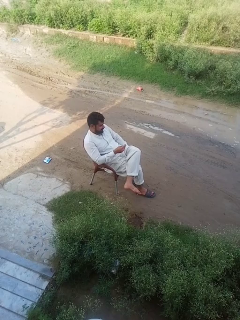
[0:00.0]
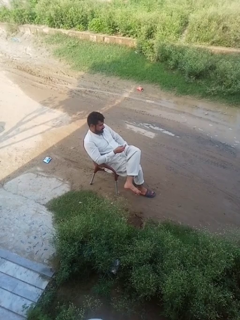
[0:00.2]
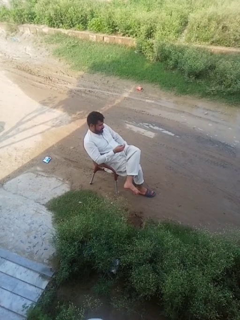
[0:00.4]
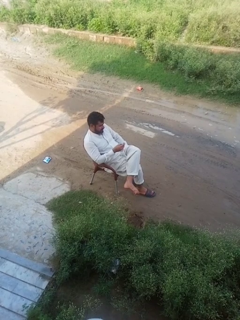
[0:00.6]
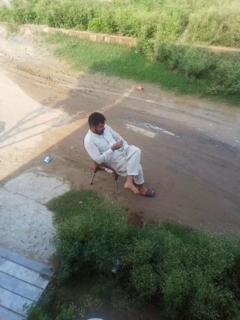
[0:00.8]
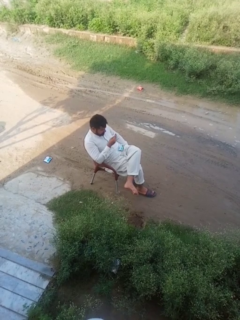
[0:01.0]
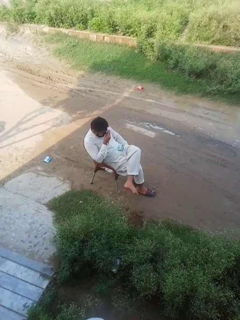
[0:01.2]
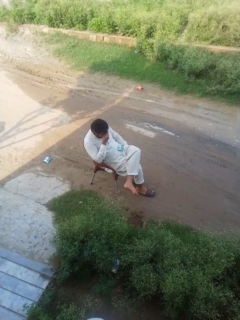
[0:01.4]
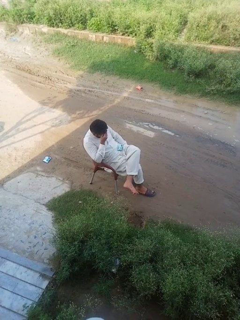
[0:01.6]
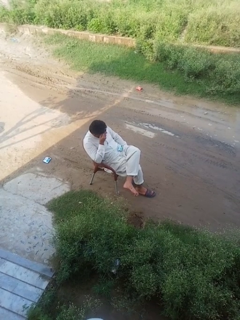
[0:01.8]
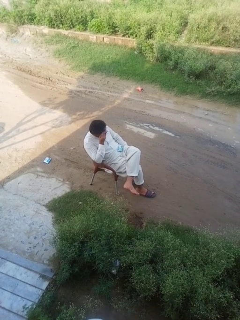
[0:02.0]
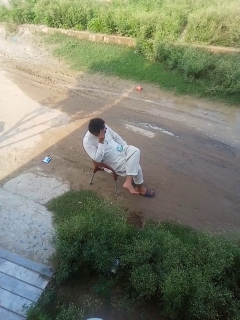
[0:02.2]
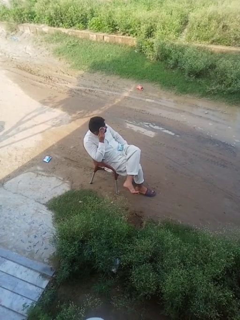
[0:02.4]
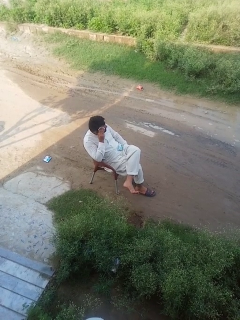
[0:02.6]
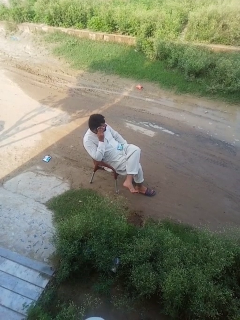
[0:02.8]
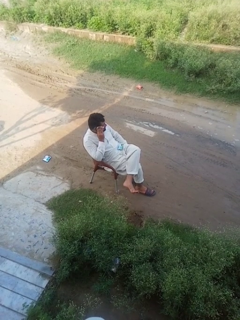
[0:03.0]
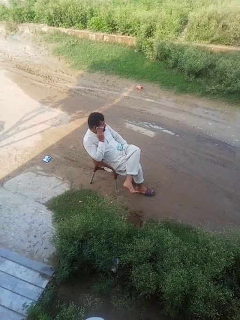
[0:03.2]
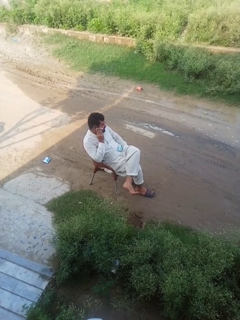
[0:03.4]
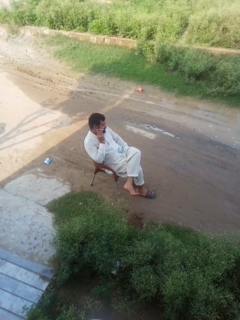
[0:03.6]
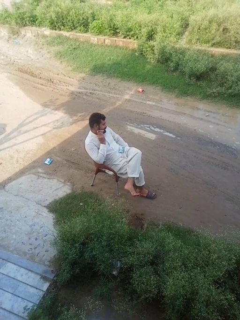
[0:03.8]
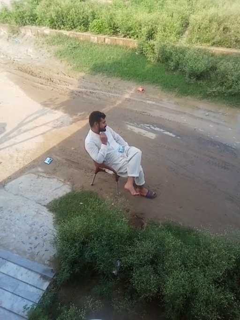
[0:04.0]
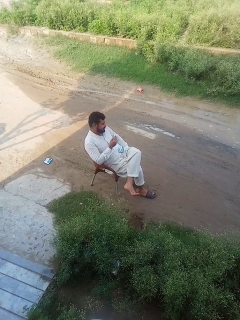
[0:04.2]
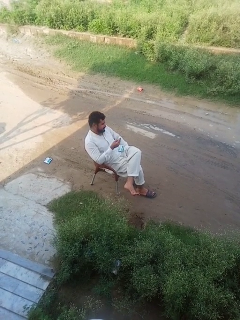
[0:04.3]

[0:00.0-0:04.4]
person wipes mouth with napkin

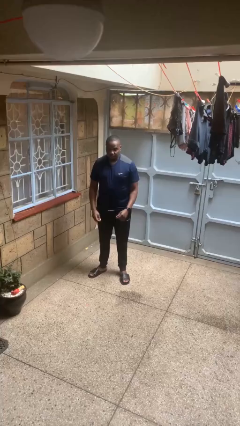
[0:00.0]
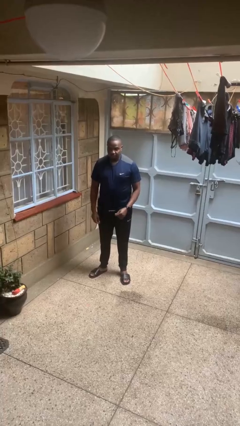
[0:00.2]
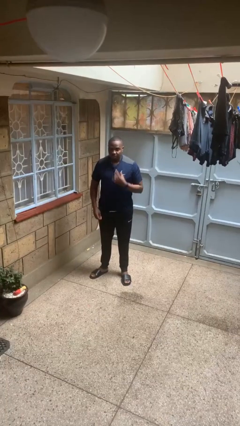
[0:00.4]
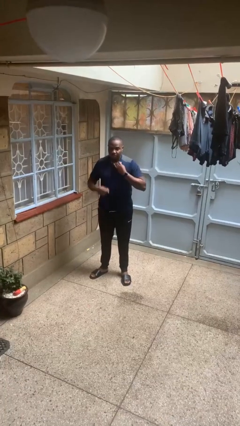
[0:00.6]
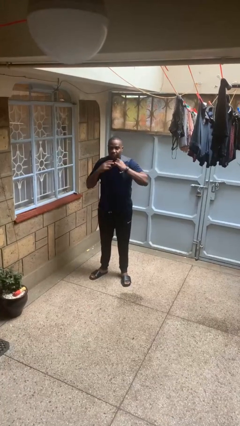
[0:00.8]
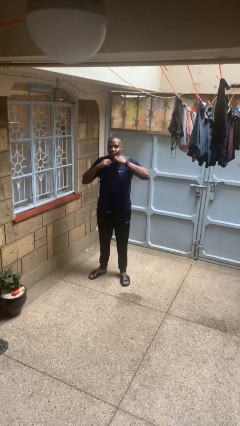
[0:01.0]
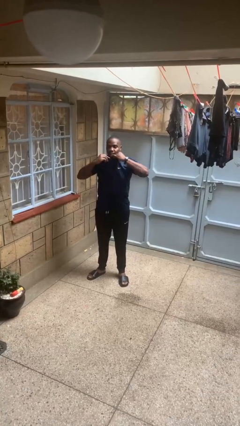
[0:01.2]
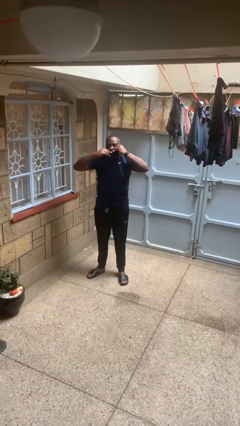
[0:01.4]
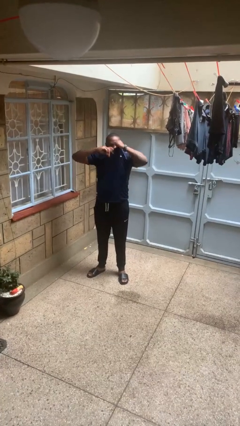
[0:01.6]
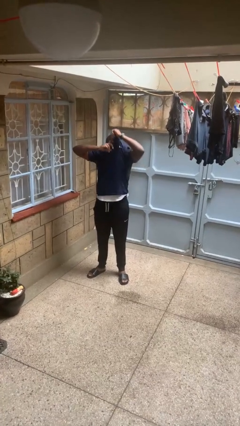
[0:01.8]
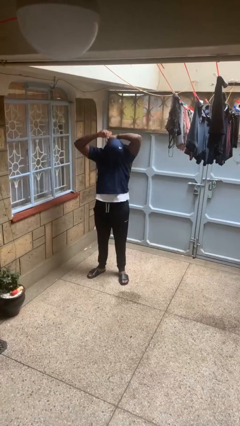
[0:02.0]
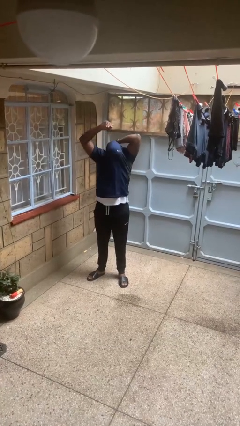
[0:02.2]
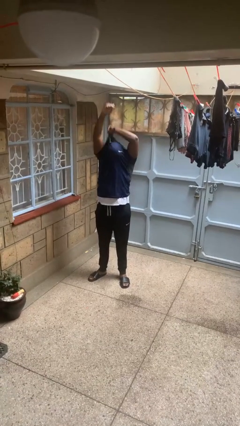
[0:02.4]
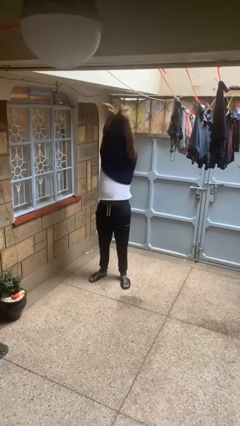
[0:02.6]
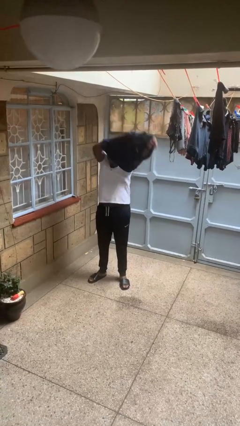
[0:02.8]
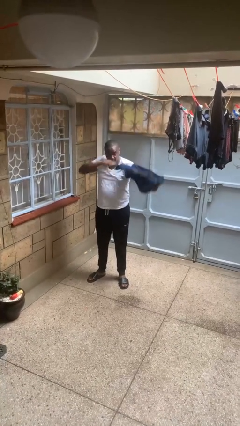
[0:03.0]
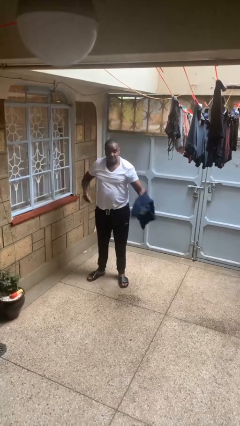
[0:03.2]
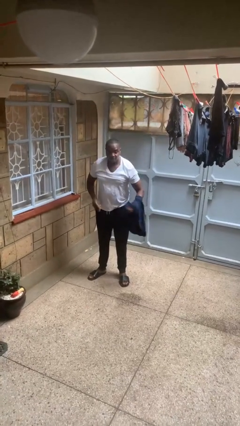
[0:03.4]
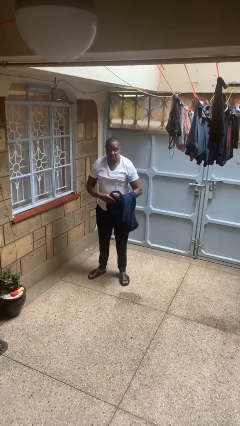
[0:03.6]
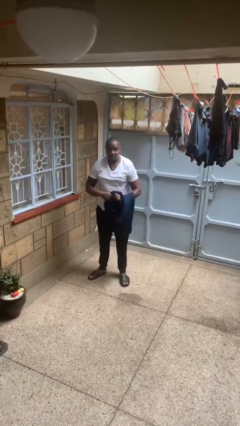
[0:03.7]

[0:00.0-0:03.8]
person takes off shirt

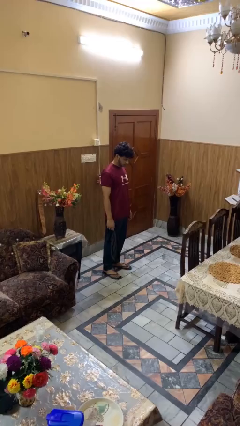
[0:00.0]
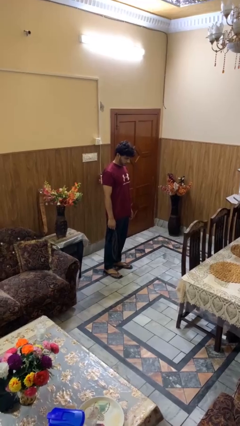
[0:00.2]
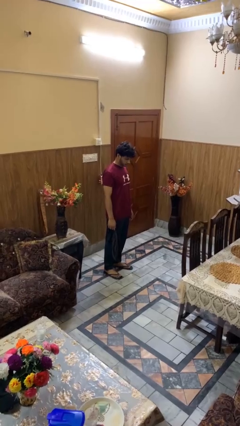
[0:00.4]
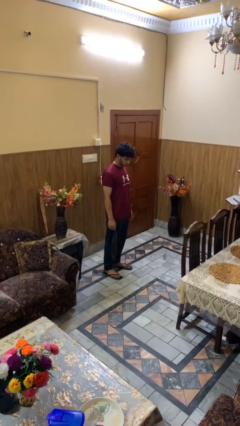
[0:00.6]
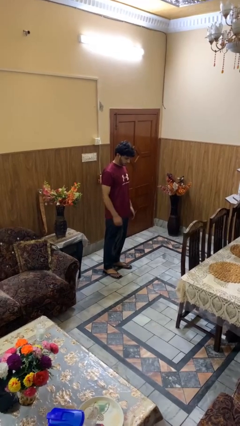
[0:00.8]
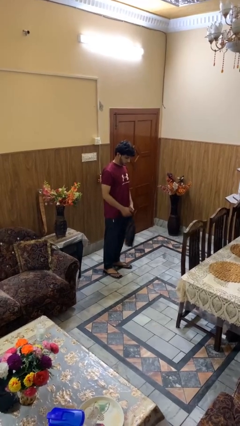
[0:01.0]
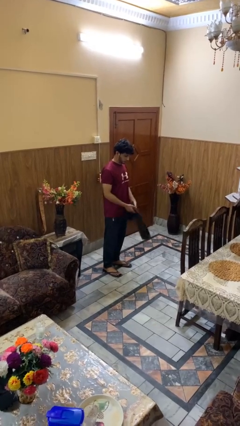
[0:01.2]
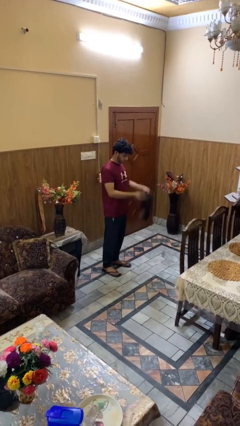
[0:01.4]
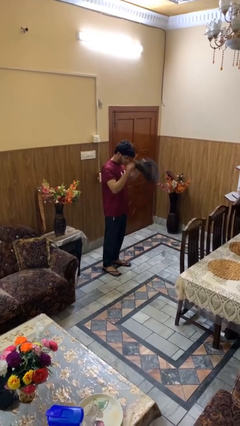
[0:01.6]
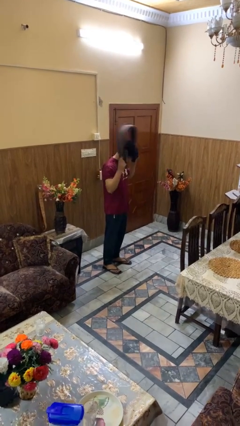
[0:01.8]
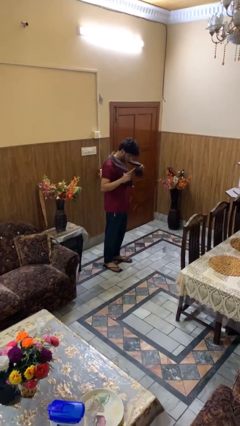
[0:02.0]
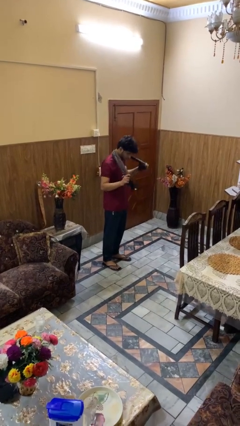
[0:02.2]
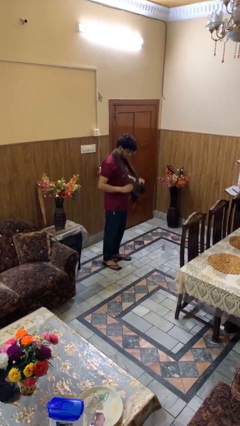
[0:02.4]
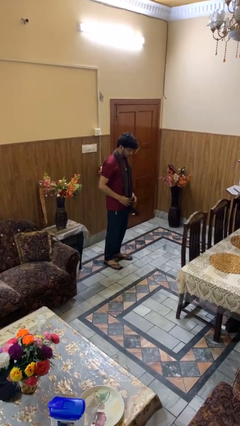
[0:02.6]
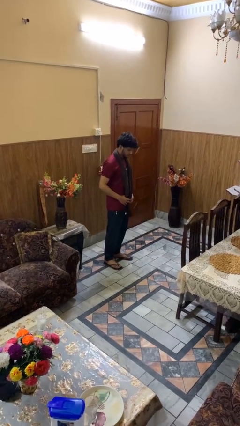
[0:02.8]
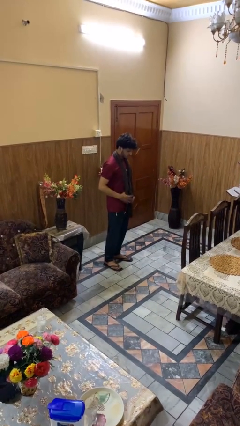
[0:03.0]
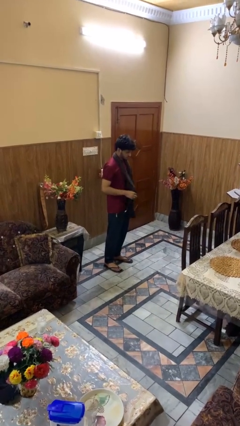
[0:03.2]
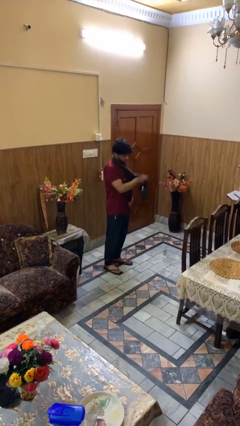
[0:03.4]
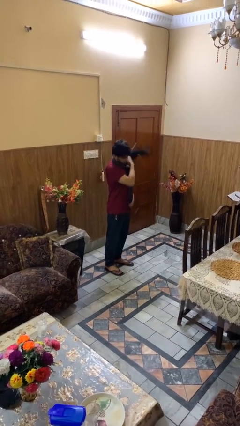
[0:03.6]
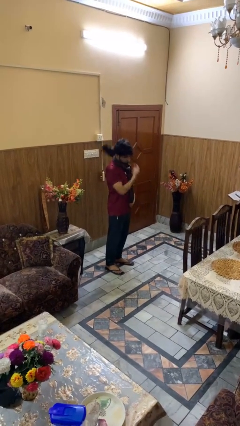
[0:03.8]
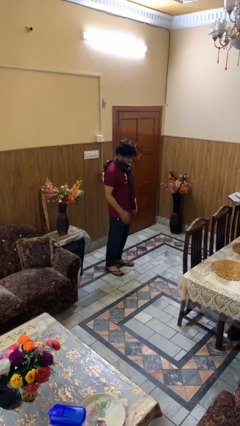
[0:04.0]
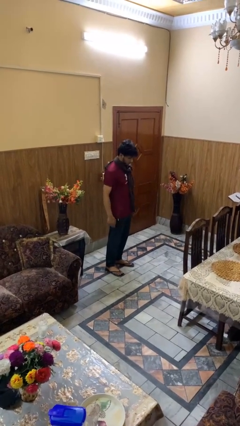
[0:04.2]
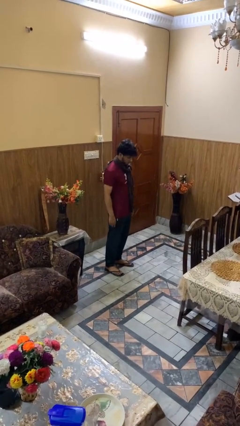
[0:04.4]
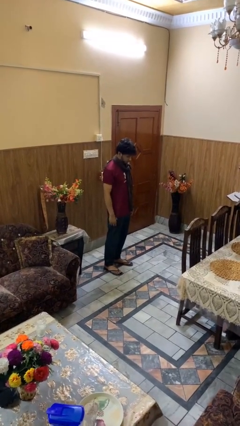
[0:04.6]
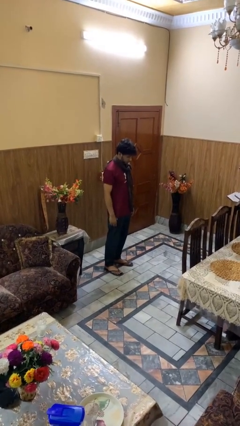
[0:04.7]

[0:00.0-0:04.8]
person puts on scarf

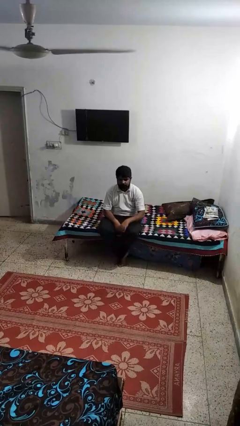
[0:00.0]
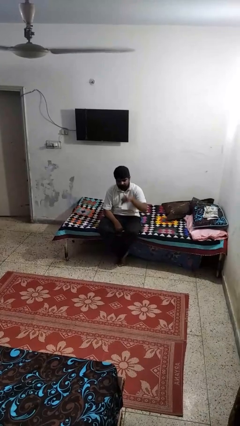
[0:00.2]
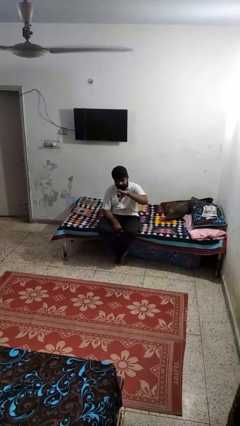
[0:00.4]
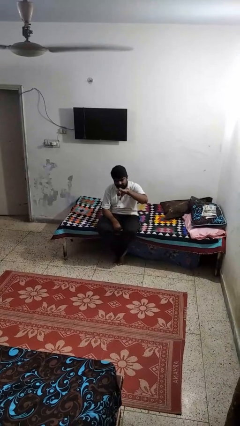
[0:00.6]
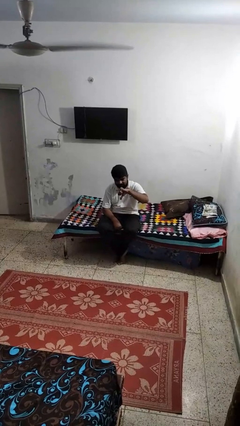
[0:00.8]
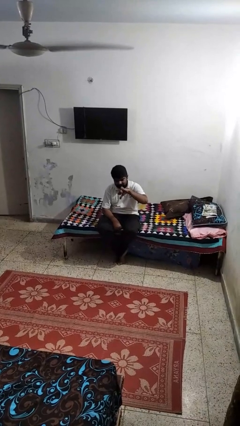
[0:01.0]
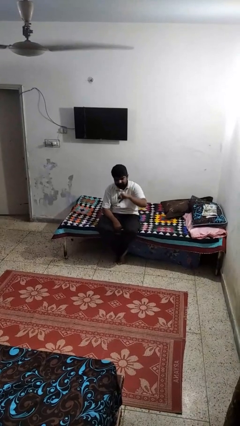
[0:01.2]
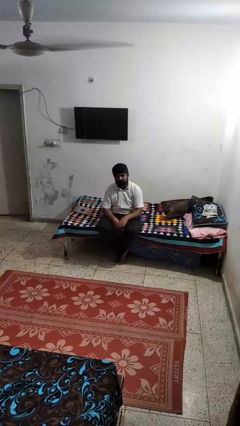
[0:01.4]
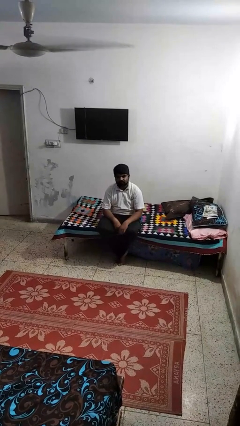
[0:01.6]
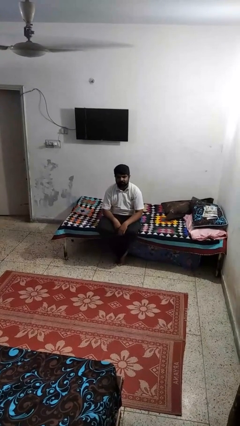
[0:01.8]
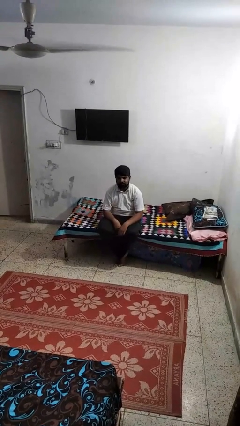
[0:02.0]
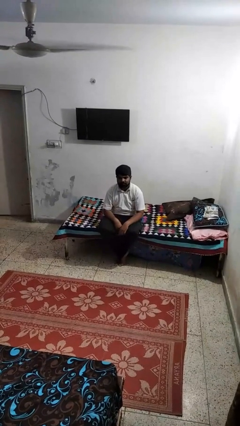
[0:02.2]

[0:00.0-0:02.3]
person gestures thumbs down

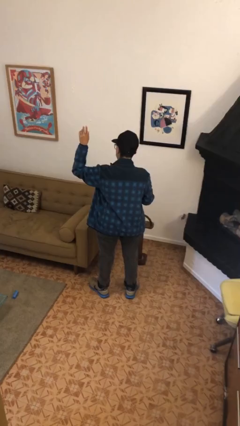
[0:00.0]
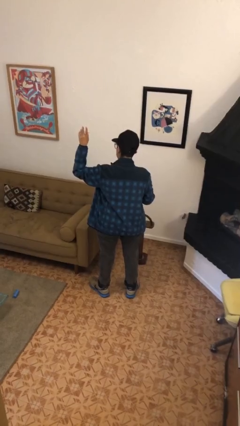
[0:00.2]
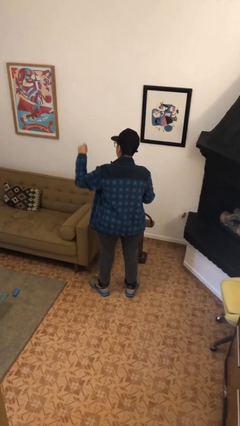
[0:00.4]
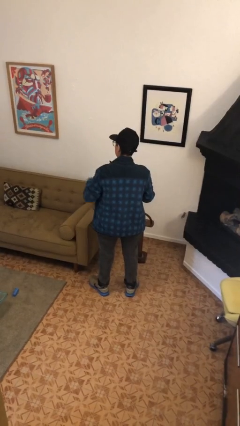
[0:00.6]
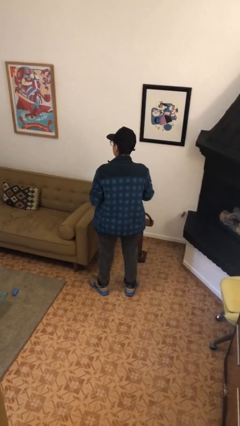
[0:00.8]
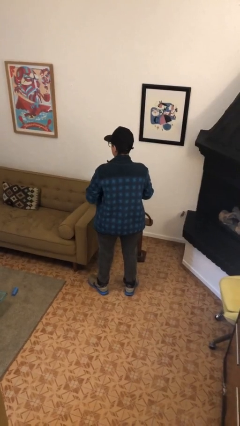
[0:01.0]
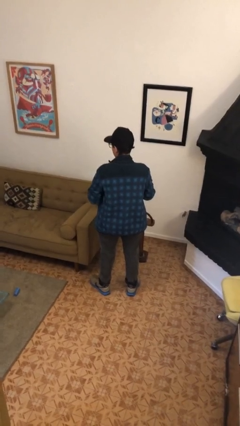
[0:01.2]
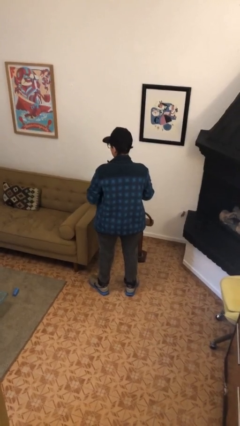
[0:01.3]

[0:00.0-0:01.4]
person gestures lower hand

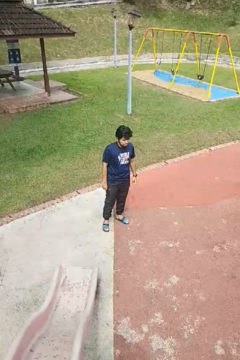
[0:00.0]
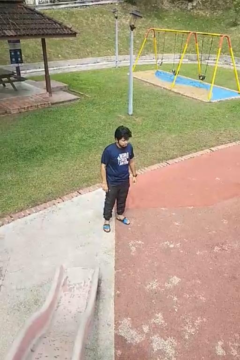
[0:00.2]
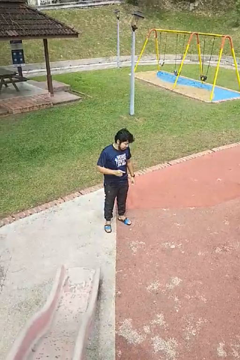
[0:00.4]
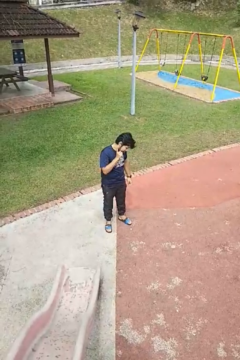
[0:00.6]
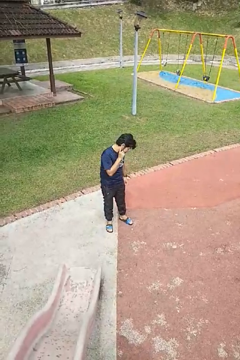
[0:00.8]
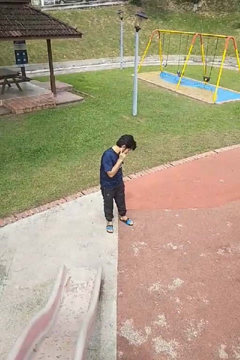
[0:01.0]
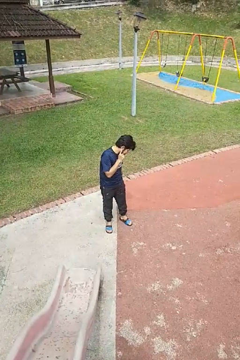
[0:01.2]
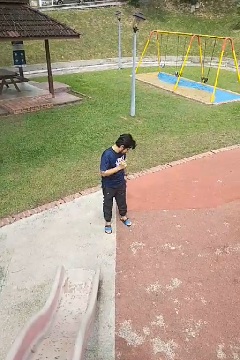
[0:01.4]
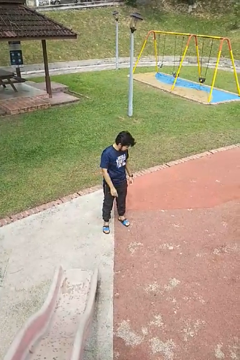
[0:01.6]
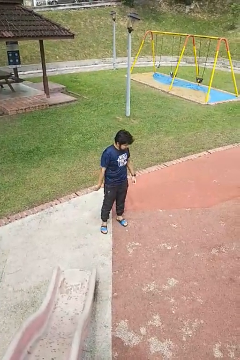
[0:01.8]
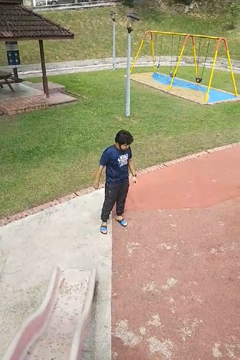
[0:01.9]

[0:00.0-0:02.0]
person gestures listen closely
